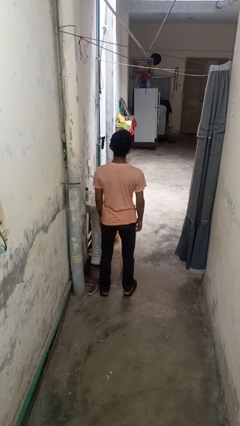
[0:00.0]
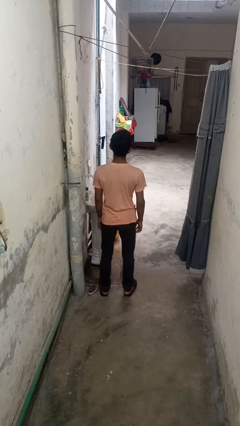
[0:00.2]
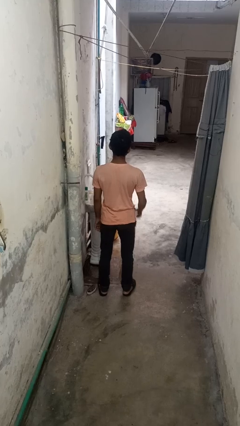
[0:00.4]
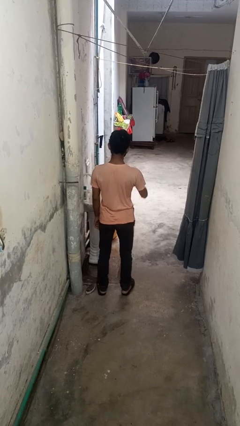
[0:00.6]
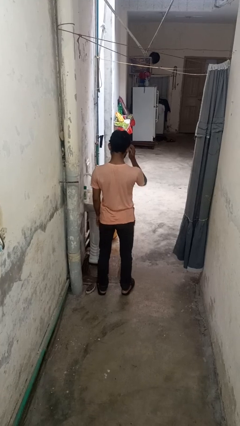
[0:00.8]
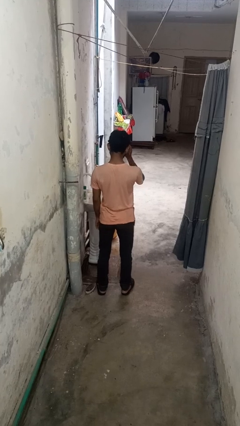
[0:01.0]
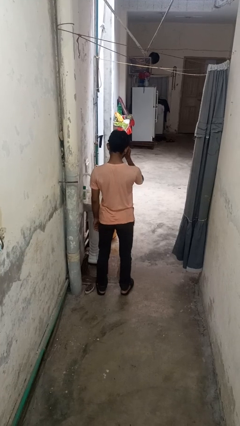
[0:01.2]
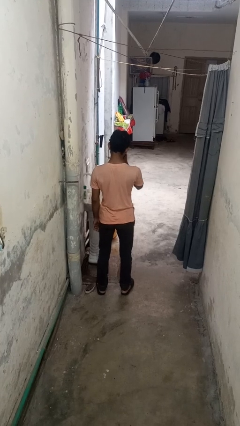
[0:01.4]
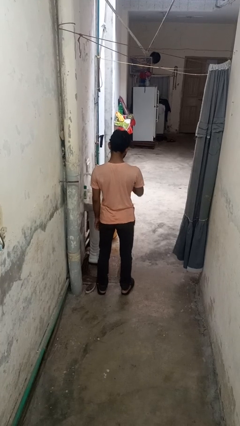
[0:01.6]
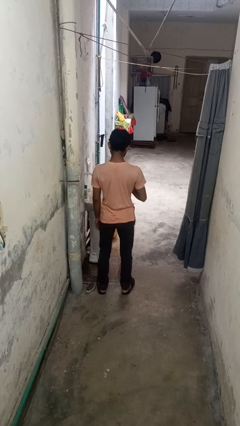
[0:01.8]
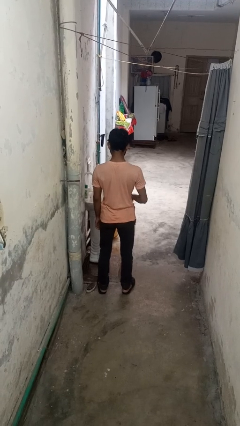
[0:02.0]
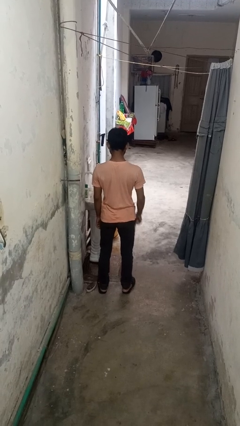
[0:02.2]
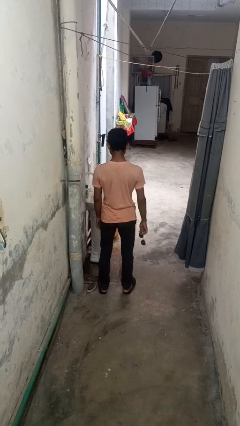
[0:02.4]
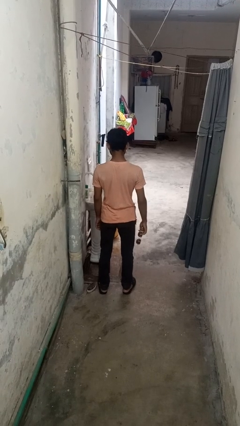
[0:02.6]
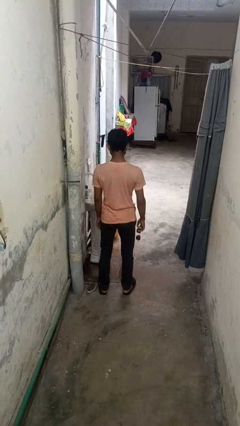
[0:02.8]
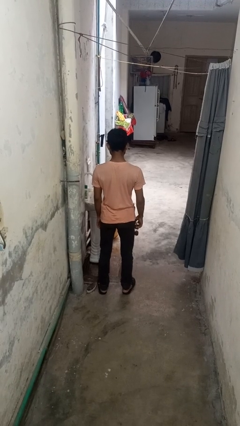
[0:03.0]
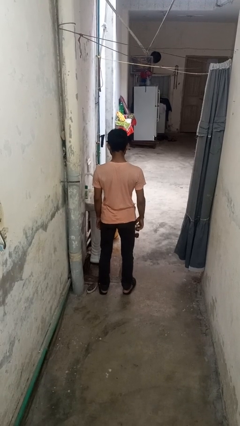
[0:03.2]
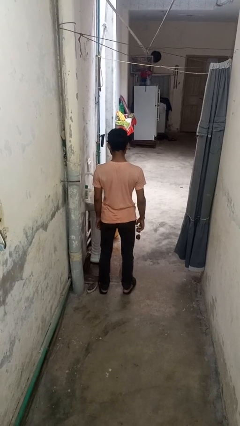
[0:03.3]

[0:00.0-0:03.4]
person takes off sunglasses

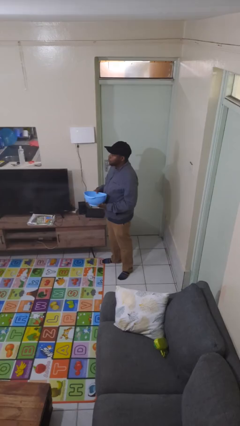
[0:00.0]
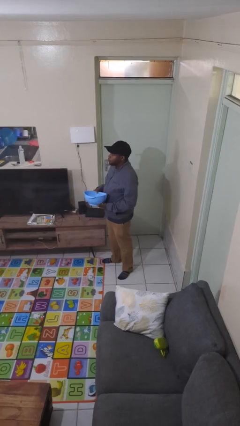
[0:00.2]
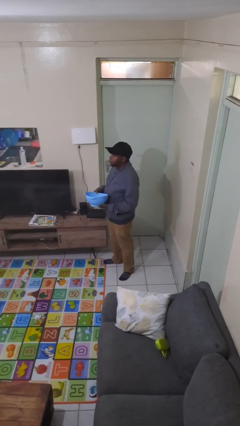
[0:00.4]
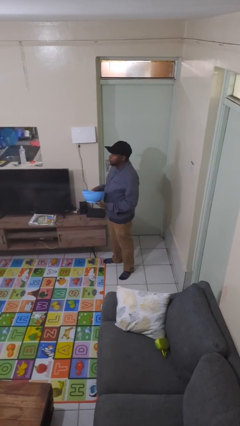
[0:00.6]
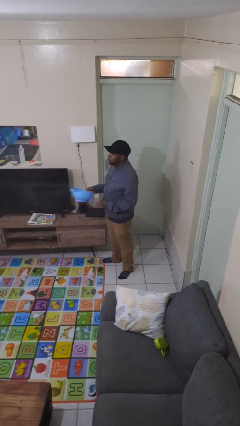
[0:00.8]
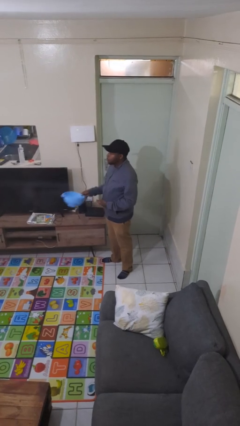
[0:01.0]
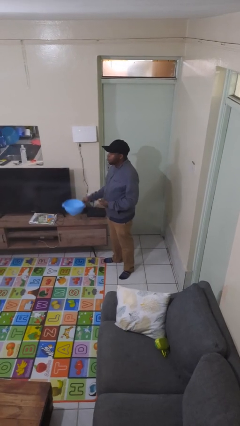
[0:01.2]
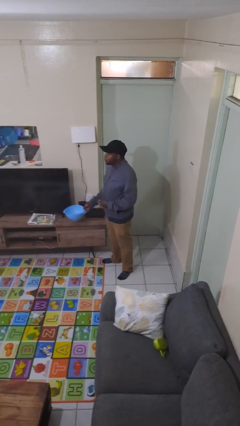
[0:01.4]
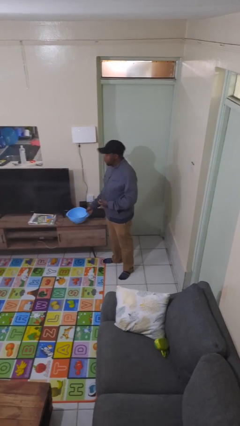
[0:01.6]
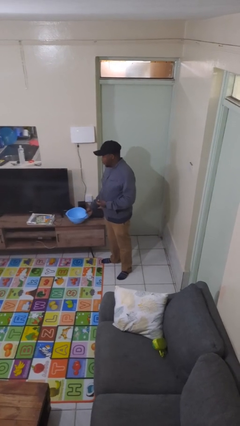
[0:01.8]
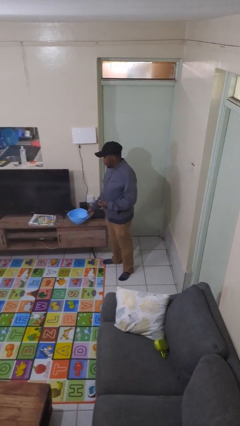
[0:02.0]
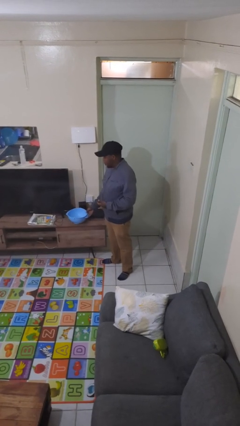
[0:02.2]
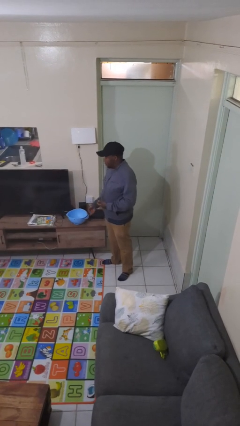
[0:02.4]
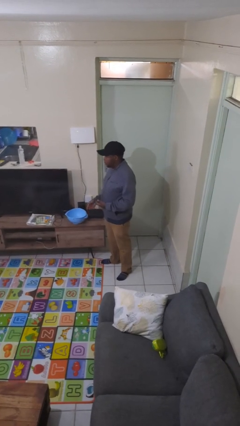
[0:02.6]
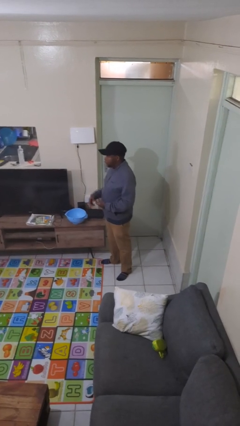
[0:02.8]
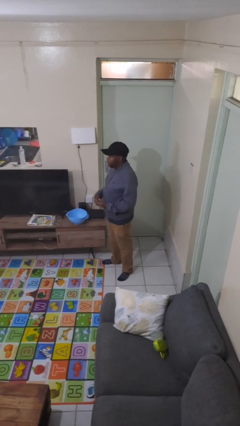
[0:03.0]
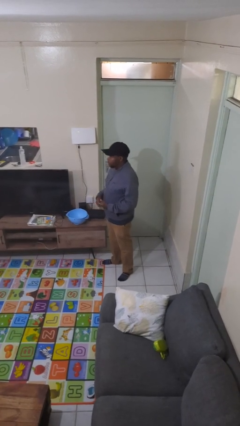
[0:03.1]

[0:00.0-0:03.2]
person puts down object on countertop

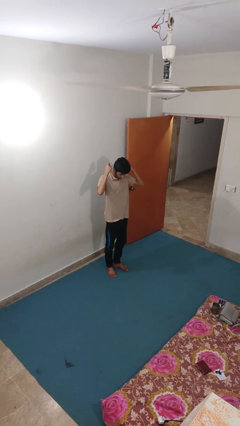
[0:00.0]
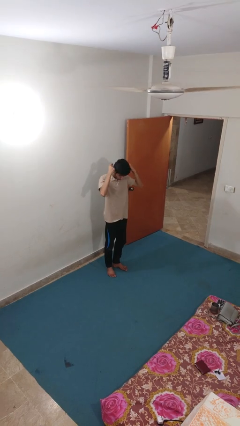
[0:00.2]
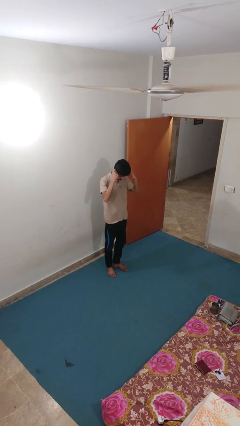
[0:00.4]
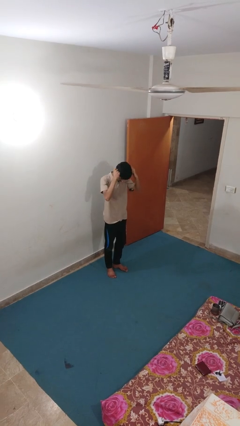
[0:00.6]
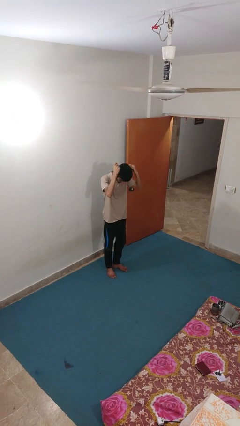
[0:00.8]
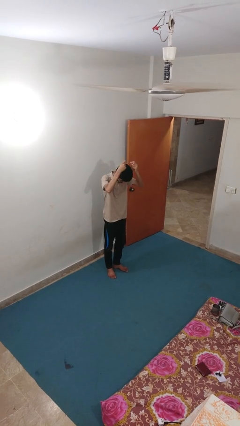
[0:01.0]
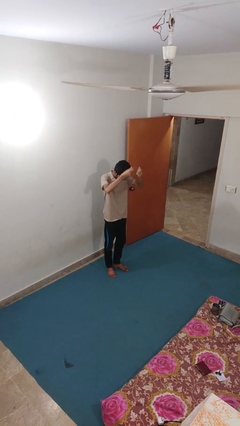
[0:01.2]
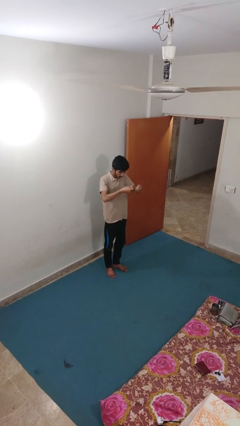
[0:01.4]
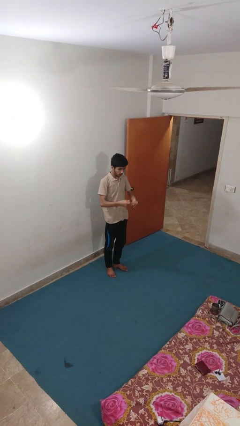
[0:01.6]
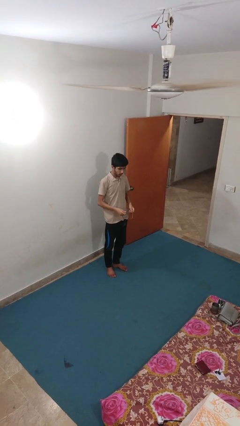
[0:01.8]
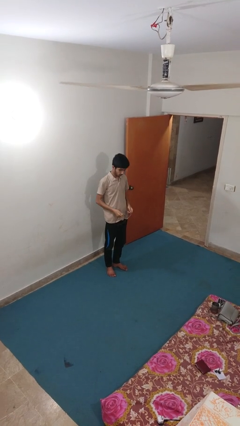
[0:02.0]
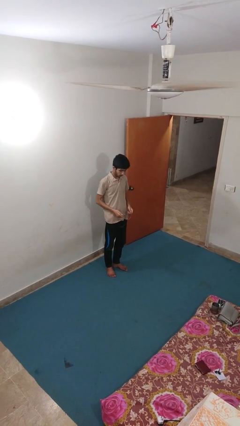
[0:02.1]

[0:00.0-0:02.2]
person takes off necklace

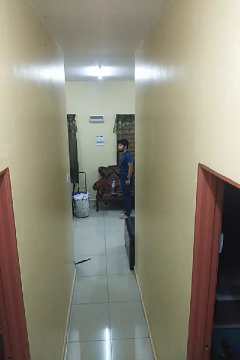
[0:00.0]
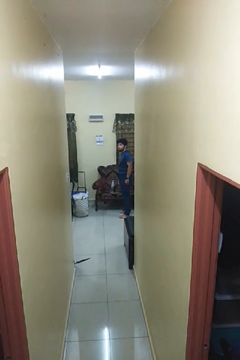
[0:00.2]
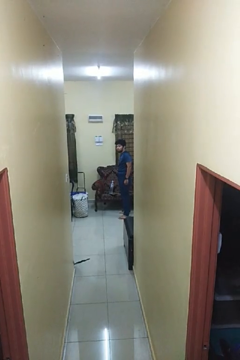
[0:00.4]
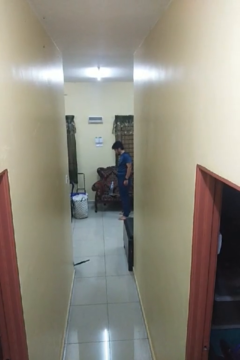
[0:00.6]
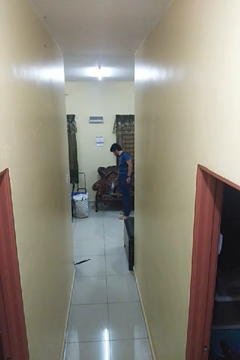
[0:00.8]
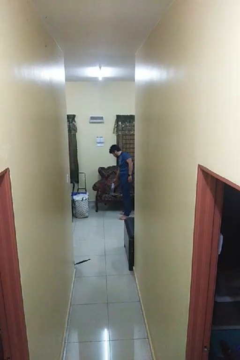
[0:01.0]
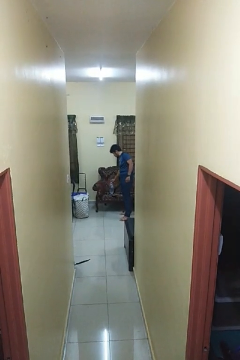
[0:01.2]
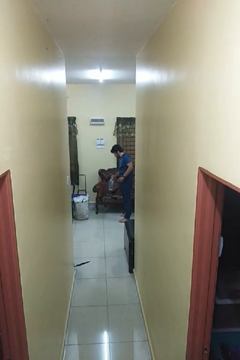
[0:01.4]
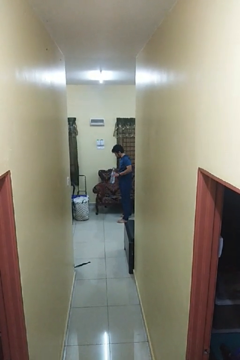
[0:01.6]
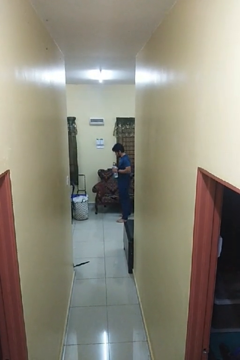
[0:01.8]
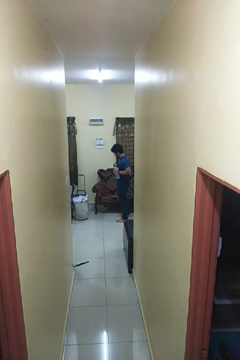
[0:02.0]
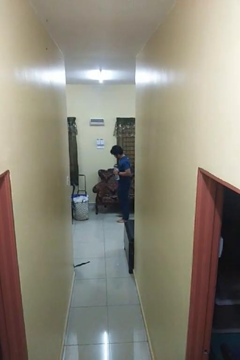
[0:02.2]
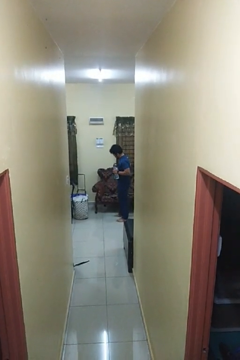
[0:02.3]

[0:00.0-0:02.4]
person picks up object from couch

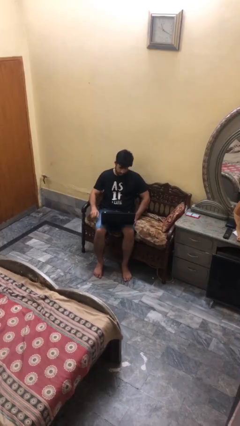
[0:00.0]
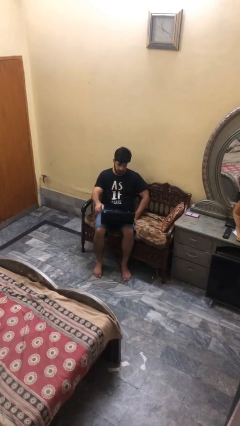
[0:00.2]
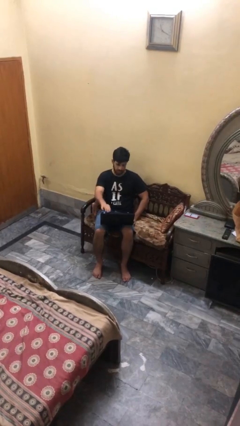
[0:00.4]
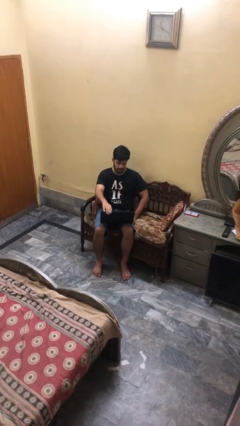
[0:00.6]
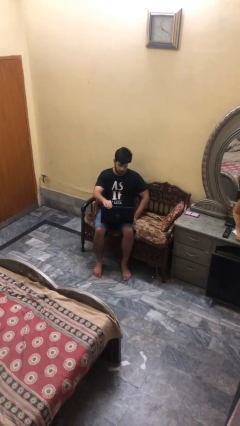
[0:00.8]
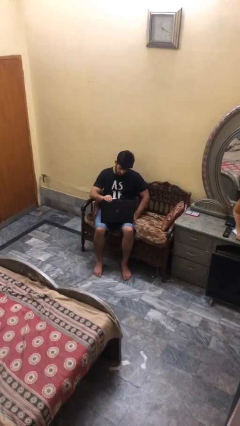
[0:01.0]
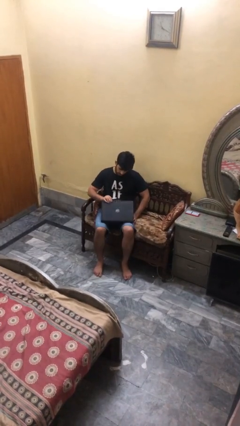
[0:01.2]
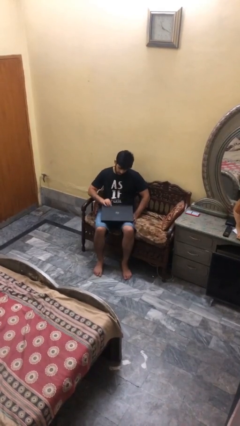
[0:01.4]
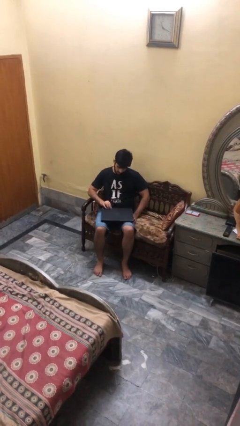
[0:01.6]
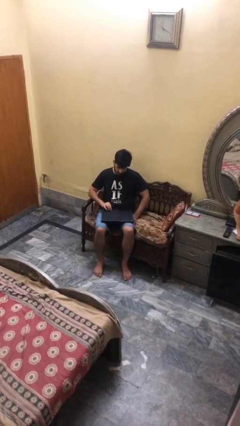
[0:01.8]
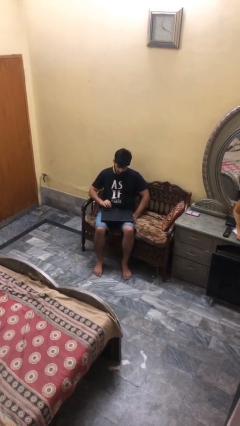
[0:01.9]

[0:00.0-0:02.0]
person closes laptop

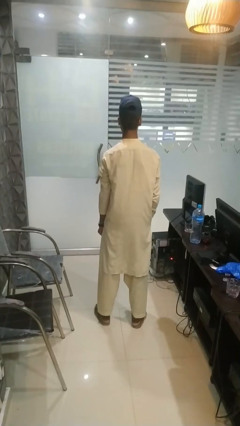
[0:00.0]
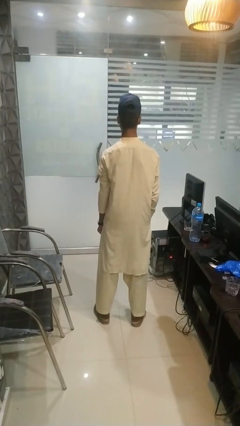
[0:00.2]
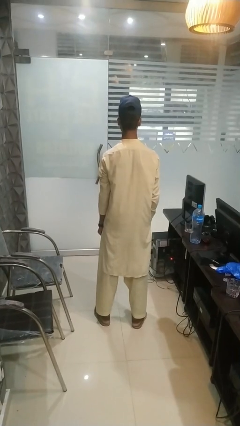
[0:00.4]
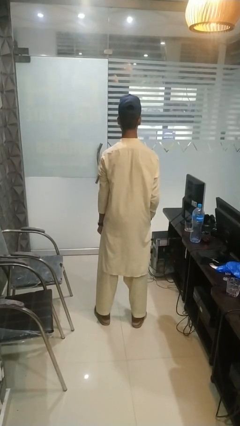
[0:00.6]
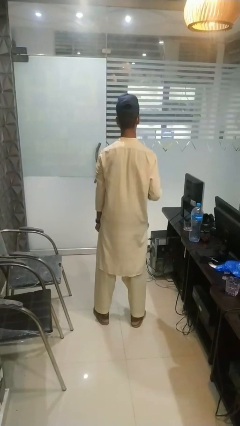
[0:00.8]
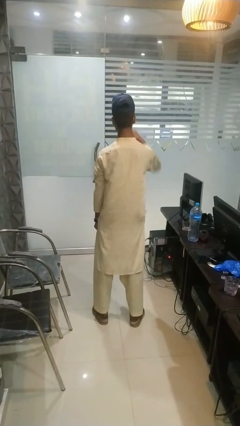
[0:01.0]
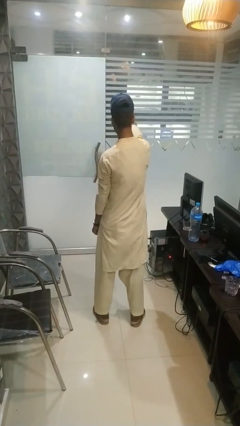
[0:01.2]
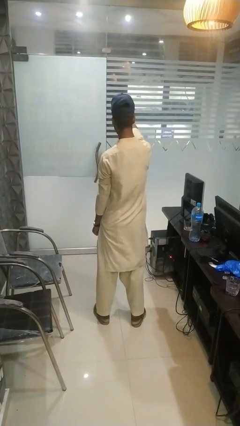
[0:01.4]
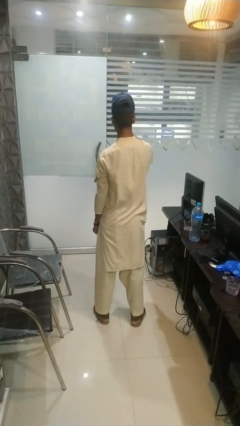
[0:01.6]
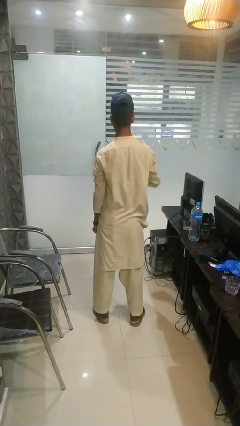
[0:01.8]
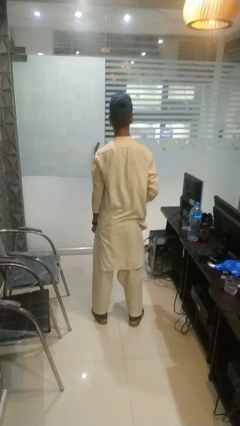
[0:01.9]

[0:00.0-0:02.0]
person karate chop

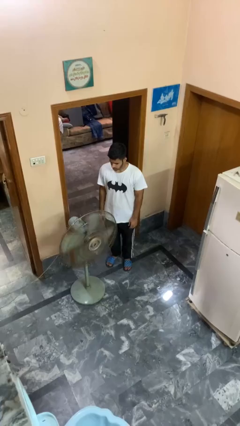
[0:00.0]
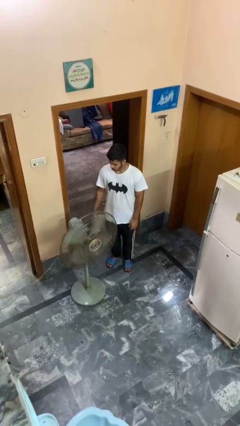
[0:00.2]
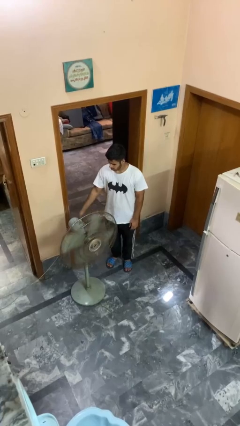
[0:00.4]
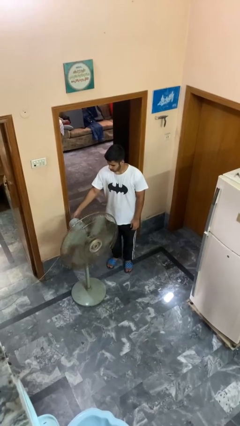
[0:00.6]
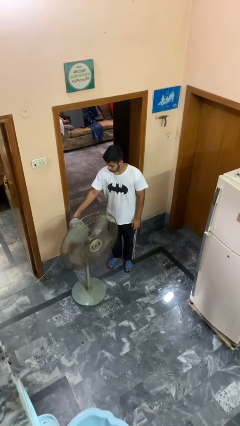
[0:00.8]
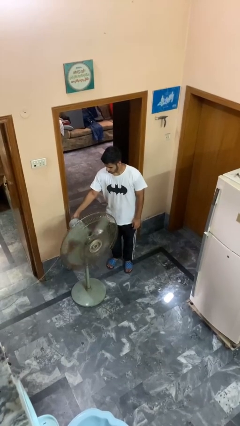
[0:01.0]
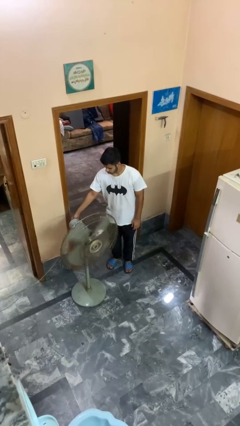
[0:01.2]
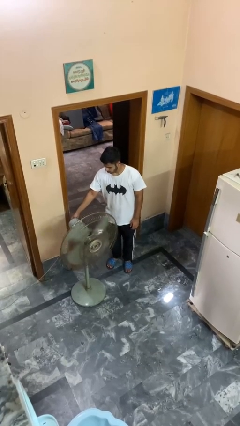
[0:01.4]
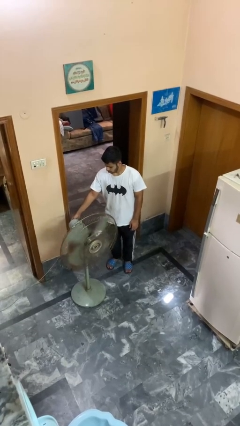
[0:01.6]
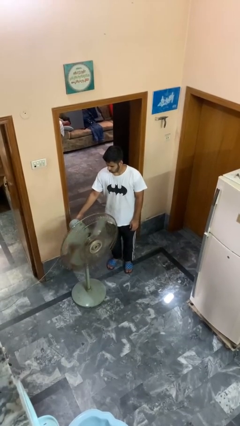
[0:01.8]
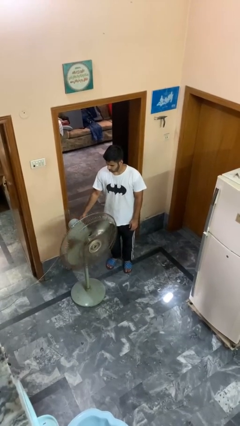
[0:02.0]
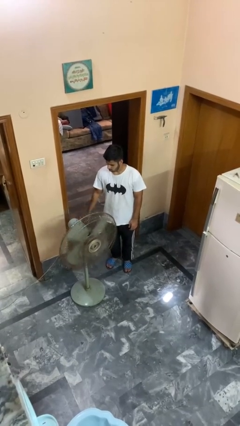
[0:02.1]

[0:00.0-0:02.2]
person turns off fan
